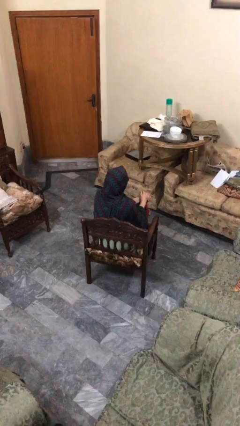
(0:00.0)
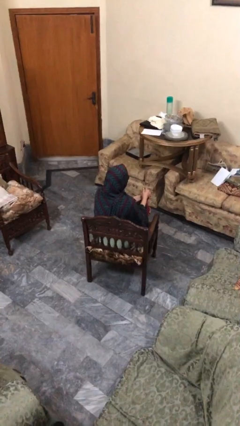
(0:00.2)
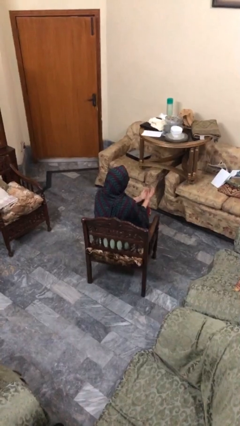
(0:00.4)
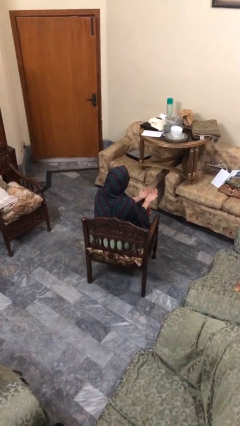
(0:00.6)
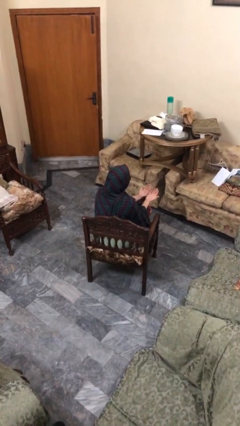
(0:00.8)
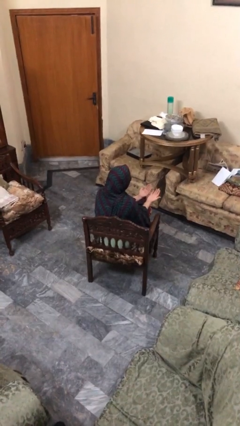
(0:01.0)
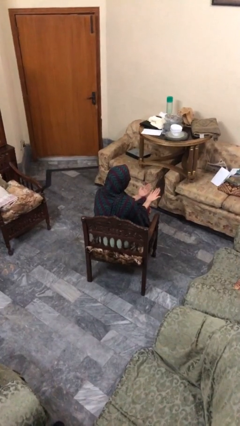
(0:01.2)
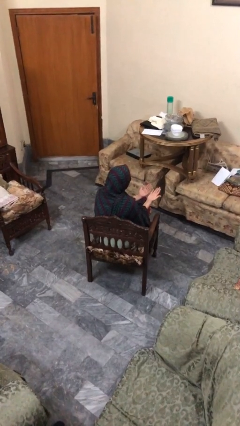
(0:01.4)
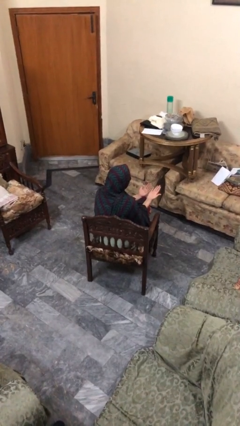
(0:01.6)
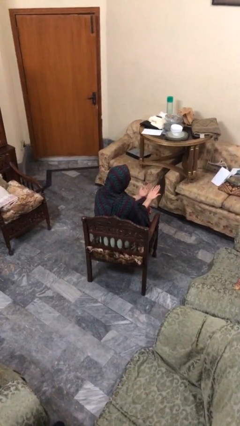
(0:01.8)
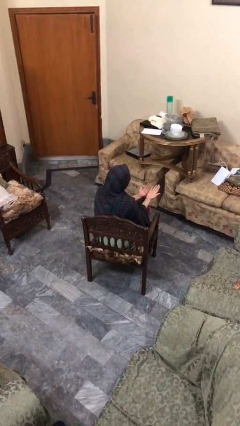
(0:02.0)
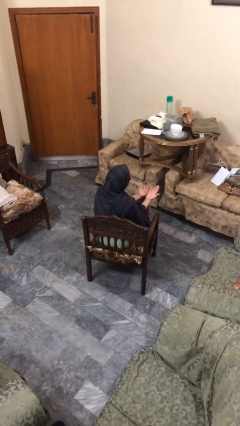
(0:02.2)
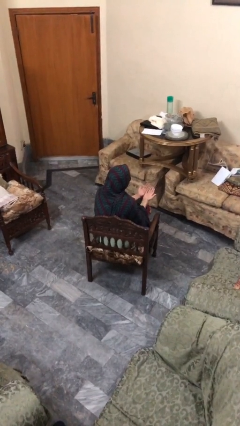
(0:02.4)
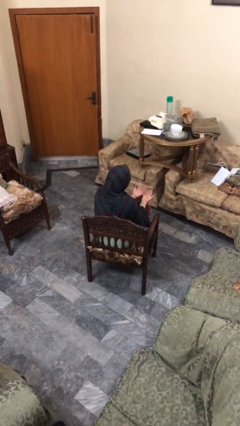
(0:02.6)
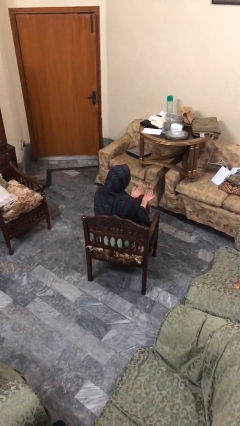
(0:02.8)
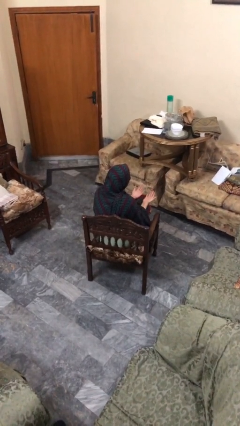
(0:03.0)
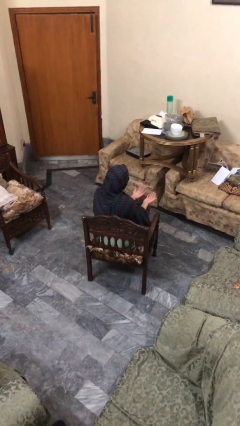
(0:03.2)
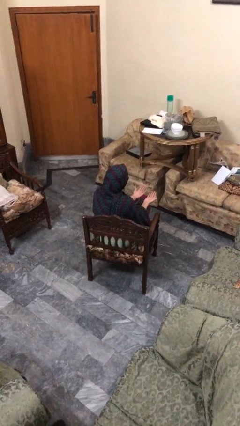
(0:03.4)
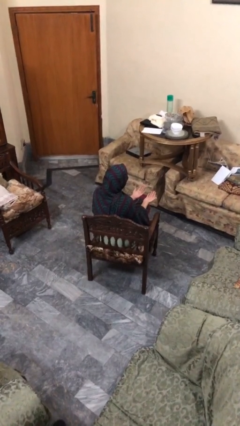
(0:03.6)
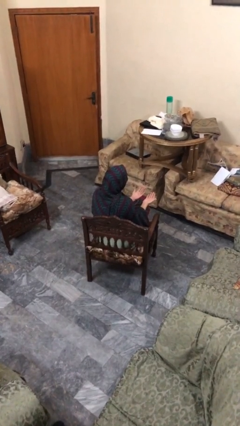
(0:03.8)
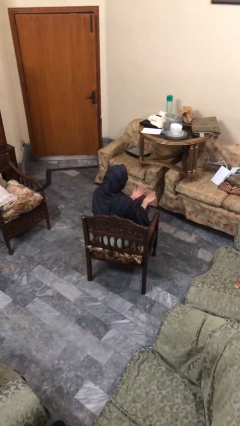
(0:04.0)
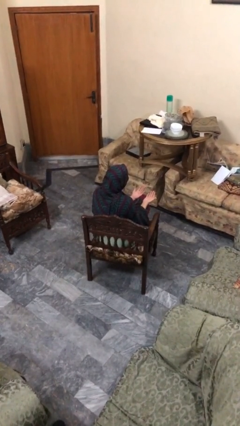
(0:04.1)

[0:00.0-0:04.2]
person looks at hands in lap

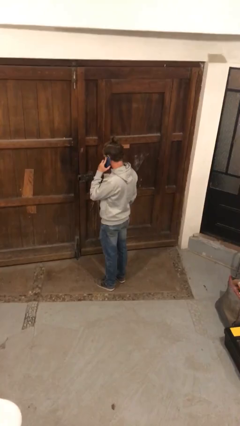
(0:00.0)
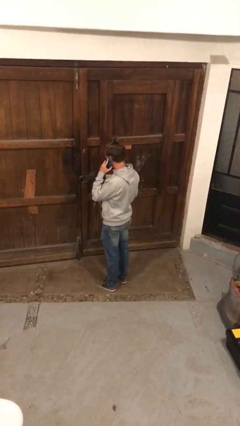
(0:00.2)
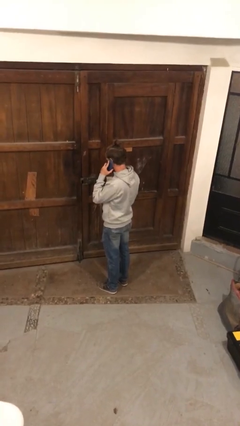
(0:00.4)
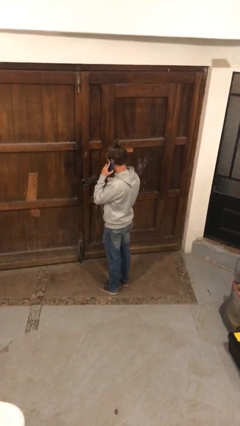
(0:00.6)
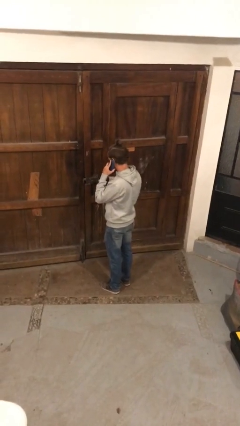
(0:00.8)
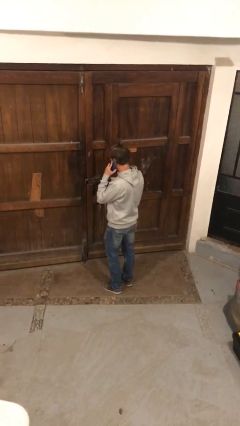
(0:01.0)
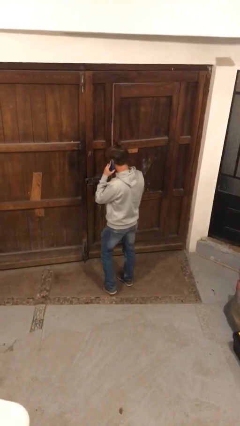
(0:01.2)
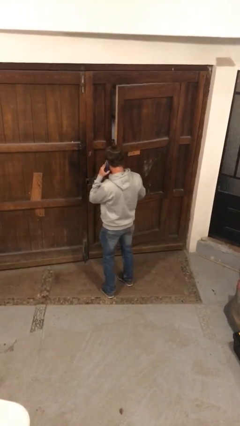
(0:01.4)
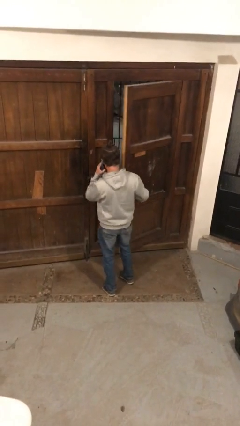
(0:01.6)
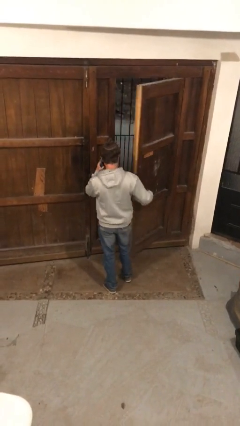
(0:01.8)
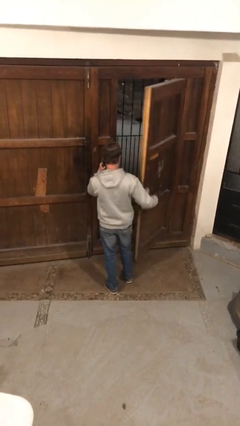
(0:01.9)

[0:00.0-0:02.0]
person opens facility door

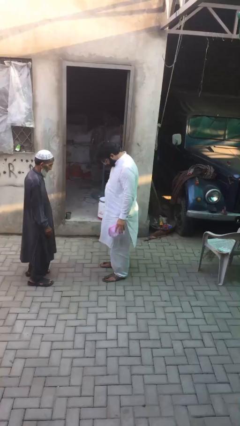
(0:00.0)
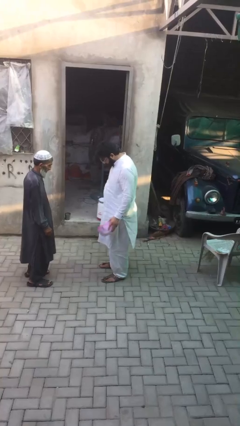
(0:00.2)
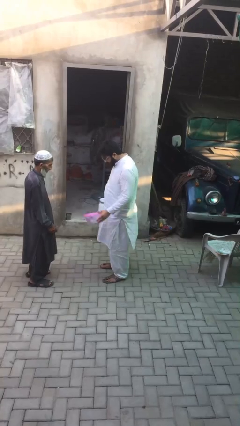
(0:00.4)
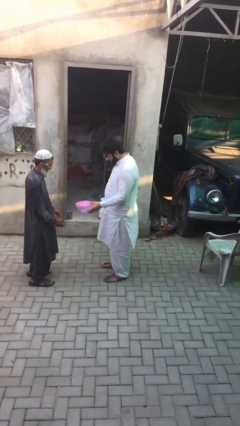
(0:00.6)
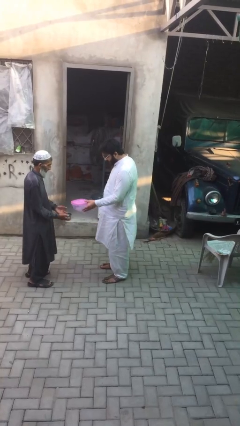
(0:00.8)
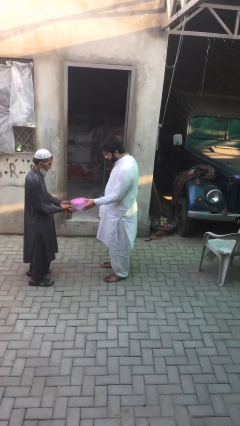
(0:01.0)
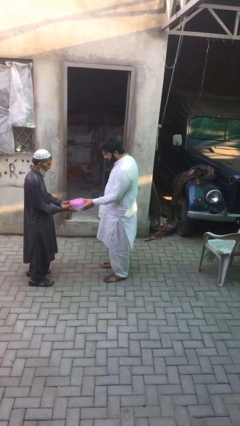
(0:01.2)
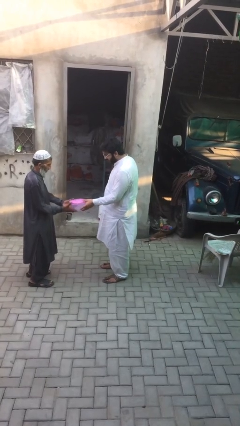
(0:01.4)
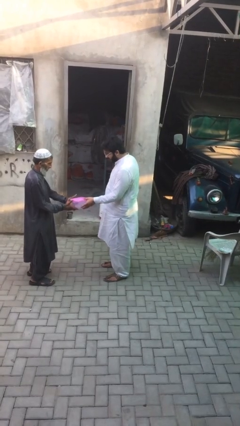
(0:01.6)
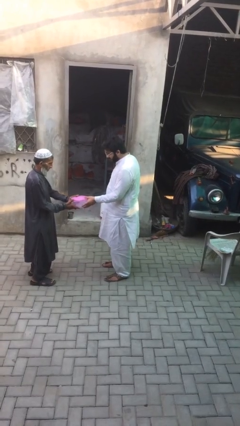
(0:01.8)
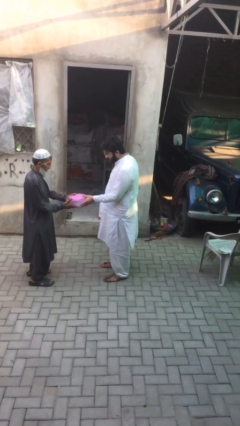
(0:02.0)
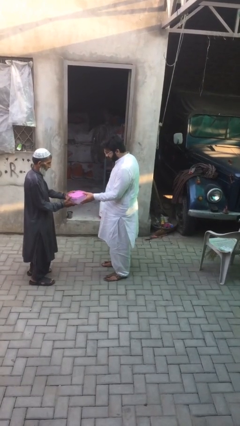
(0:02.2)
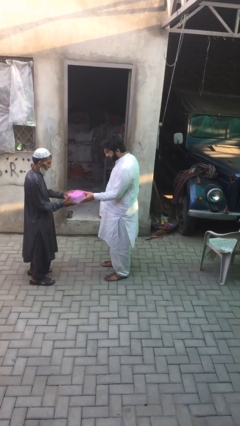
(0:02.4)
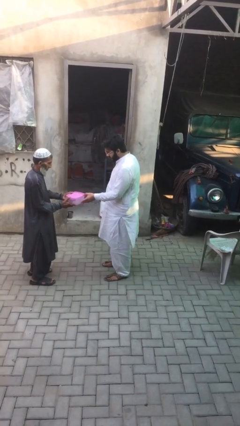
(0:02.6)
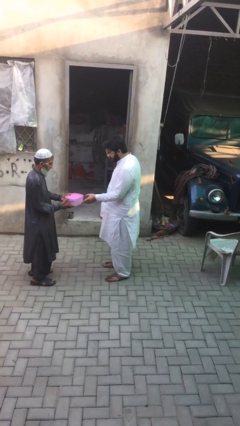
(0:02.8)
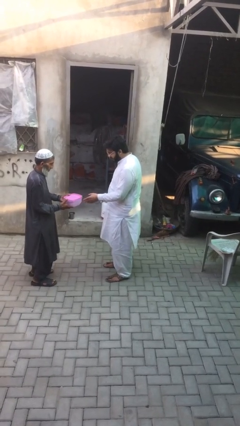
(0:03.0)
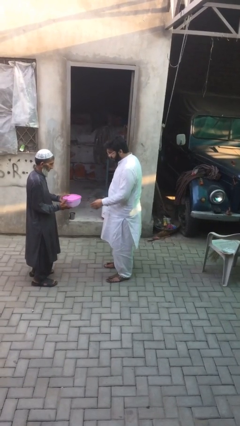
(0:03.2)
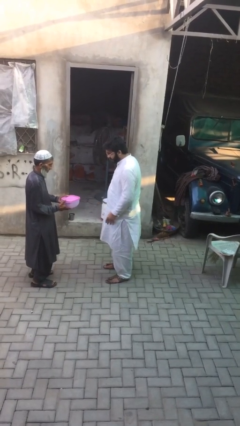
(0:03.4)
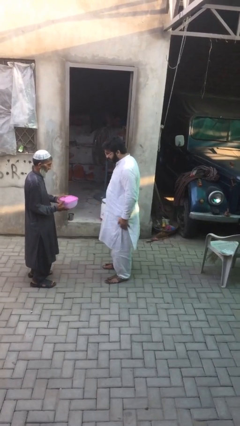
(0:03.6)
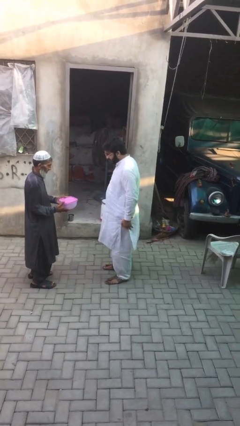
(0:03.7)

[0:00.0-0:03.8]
person transfers object to person

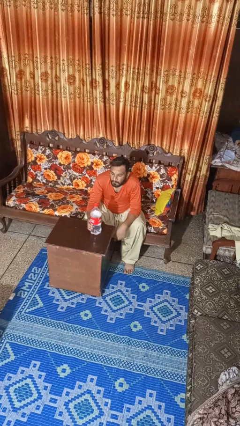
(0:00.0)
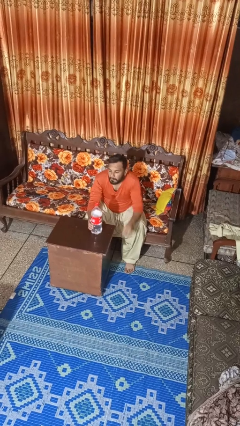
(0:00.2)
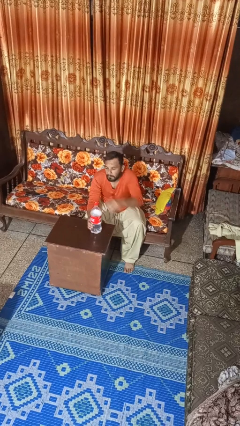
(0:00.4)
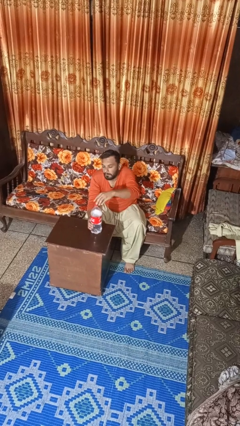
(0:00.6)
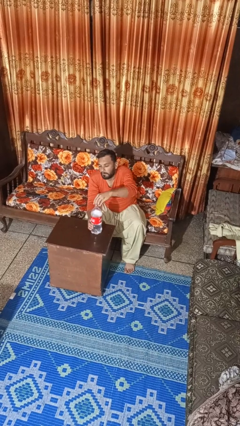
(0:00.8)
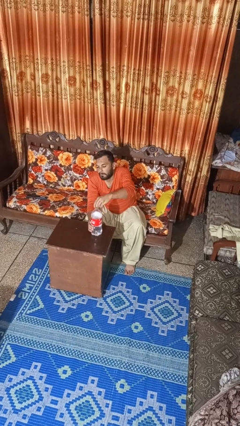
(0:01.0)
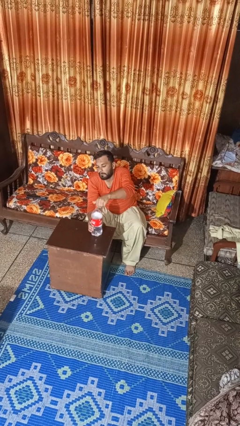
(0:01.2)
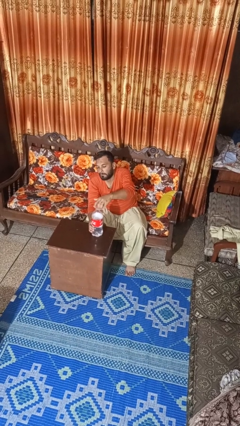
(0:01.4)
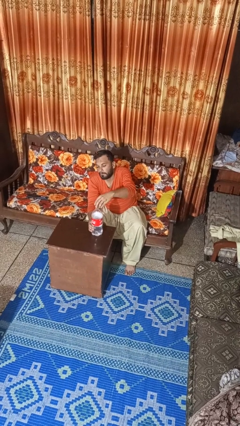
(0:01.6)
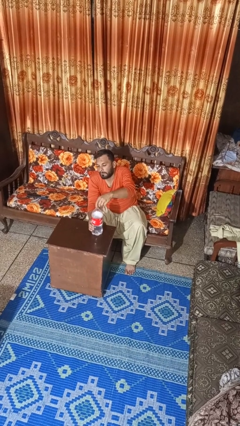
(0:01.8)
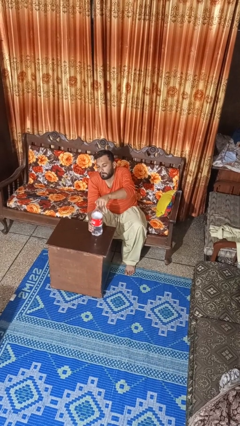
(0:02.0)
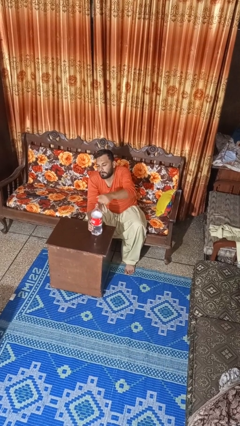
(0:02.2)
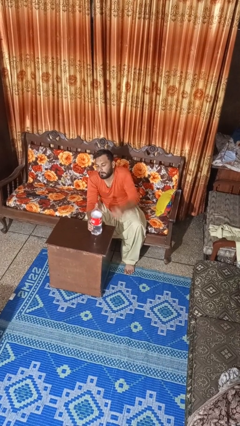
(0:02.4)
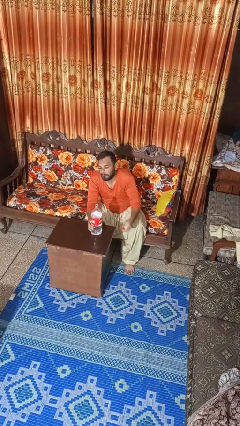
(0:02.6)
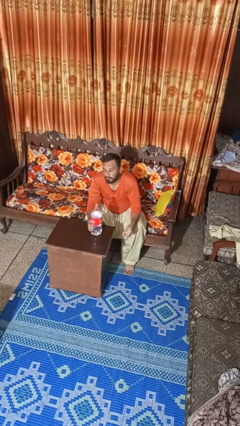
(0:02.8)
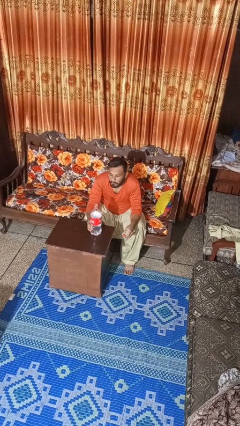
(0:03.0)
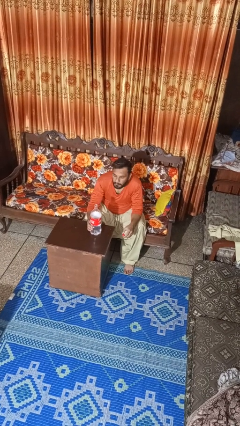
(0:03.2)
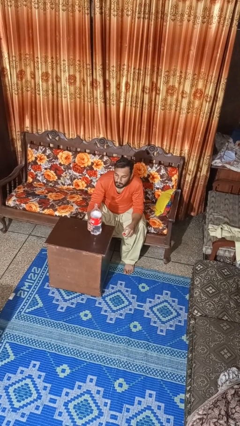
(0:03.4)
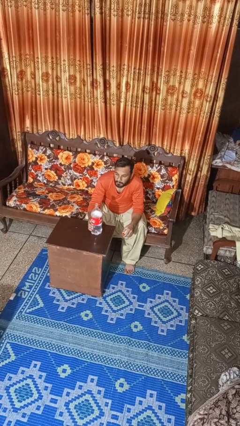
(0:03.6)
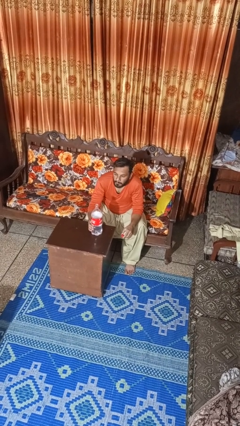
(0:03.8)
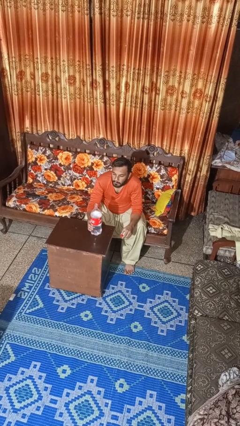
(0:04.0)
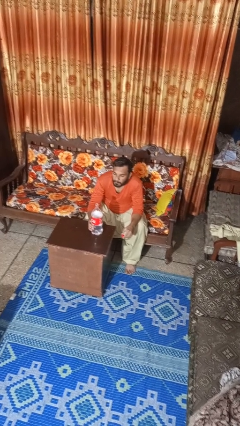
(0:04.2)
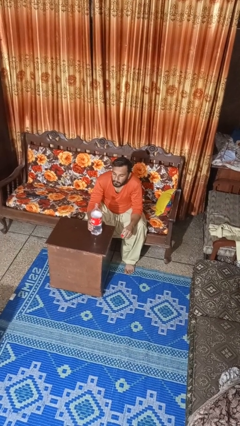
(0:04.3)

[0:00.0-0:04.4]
person unscrews lid from bottle

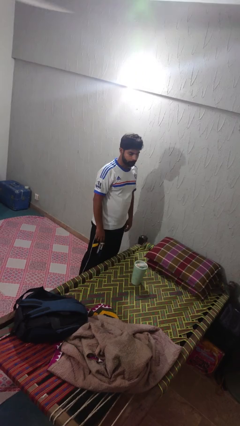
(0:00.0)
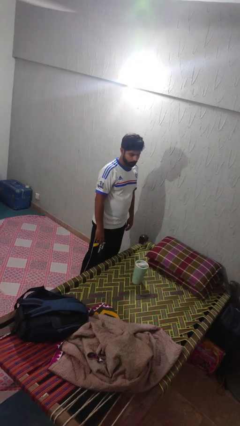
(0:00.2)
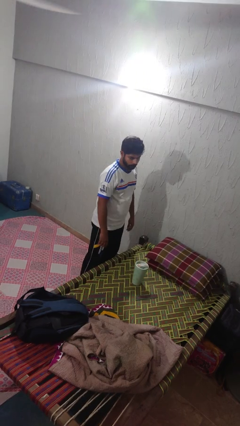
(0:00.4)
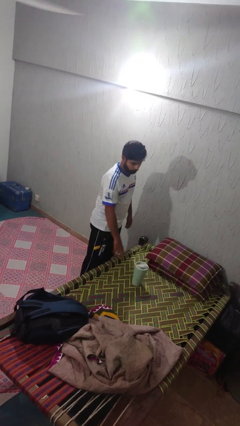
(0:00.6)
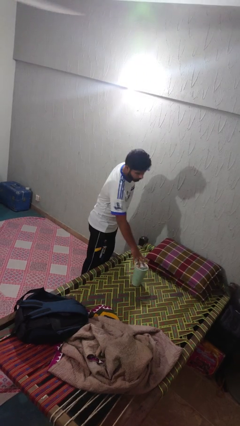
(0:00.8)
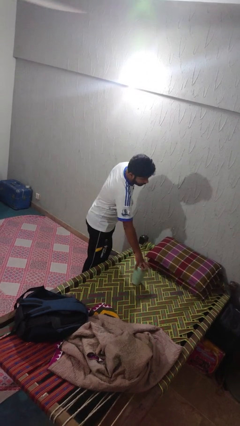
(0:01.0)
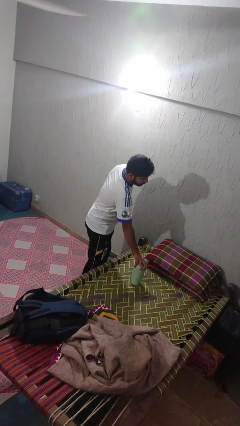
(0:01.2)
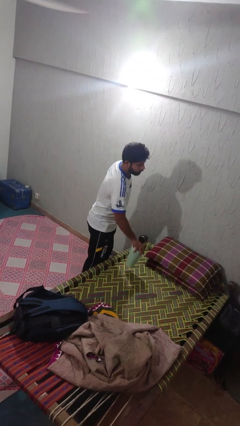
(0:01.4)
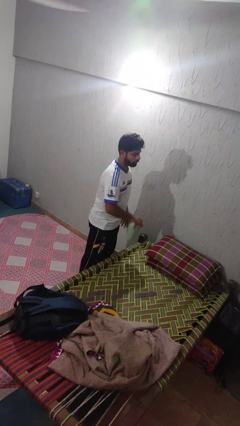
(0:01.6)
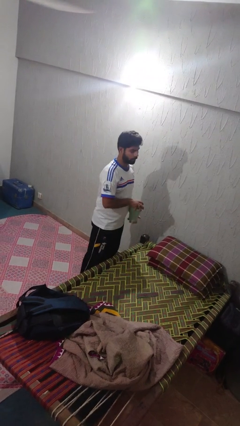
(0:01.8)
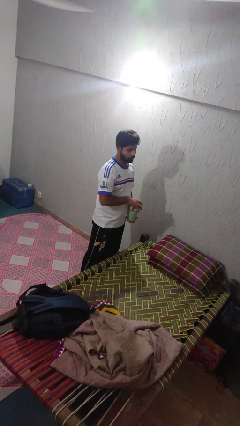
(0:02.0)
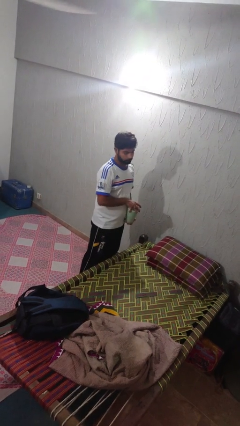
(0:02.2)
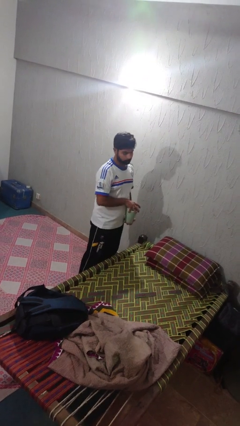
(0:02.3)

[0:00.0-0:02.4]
person picks up object from bed

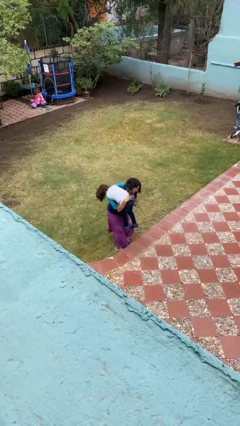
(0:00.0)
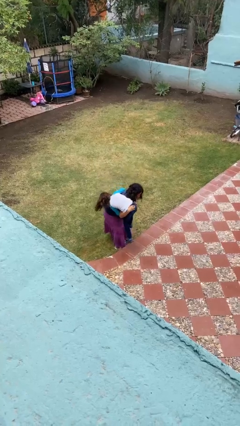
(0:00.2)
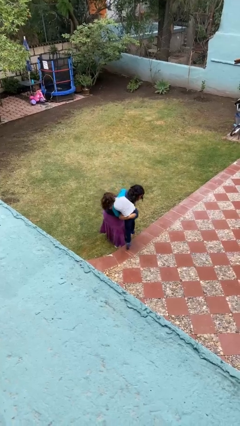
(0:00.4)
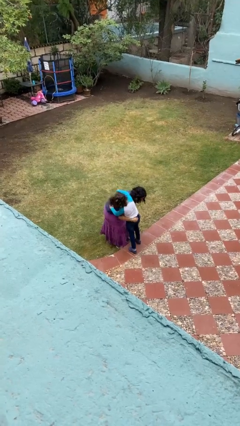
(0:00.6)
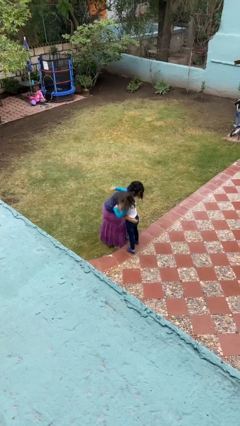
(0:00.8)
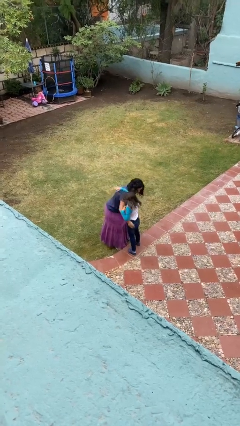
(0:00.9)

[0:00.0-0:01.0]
person puts down person
